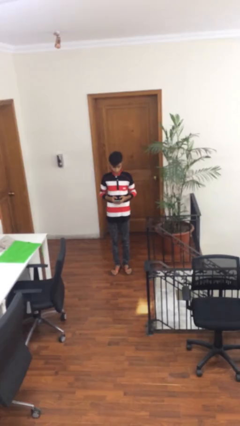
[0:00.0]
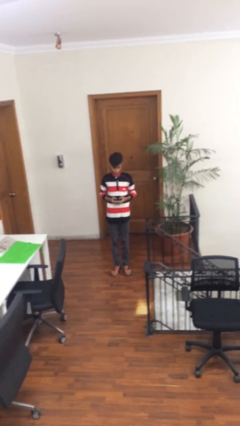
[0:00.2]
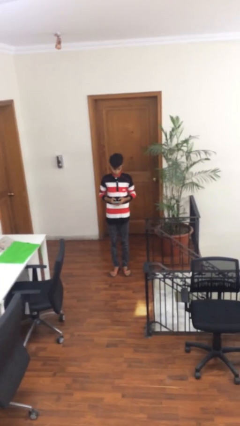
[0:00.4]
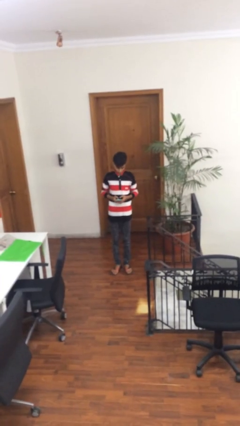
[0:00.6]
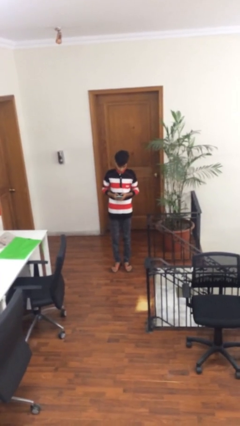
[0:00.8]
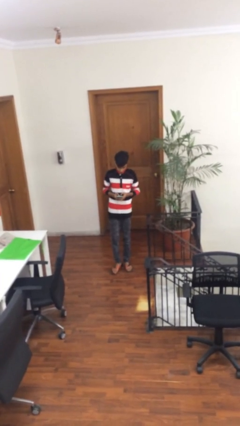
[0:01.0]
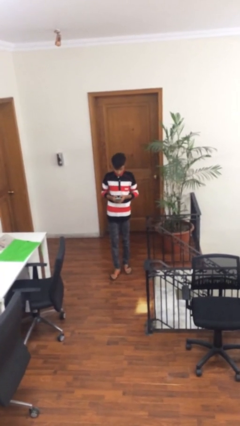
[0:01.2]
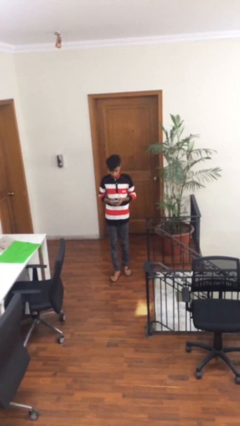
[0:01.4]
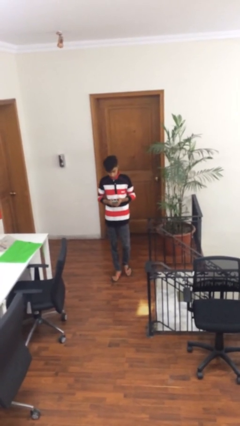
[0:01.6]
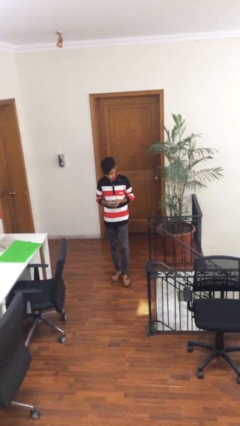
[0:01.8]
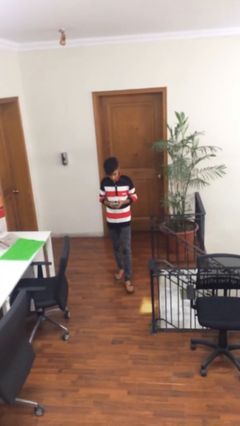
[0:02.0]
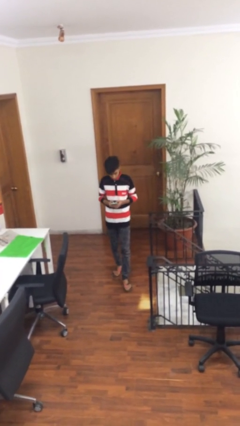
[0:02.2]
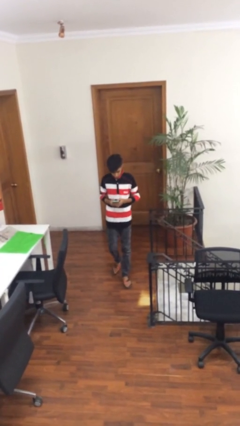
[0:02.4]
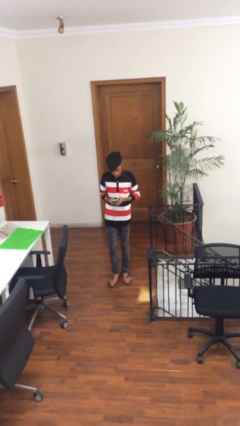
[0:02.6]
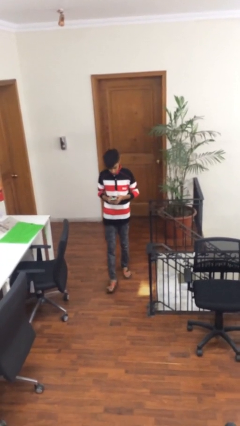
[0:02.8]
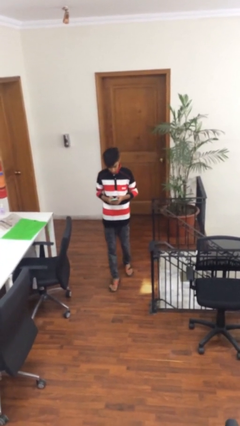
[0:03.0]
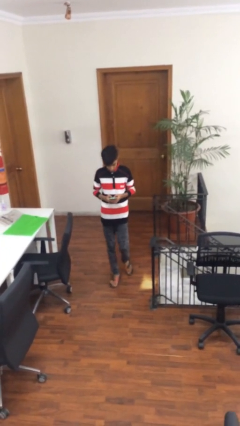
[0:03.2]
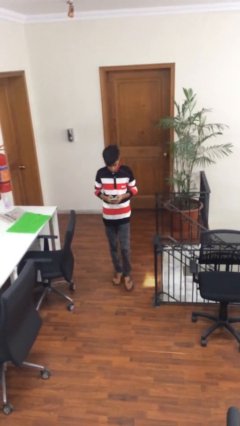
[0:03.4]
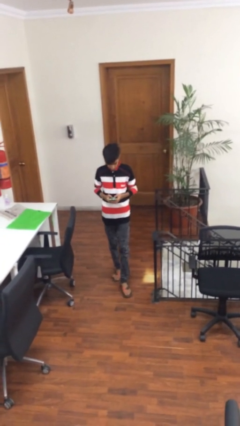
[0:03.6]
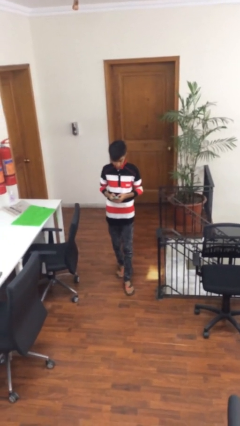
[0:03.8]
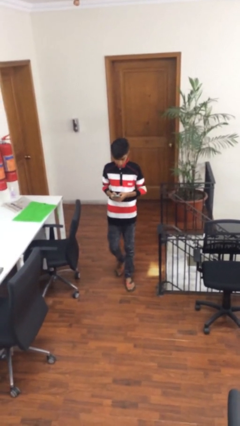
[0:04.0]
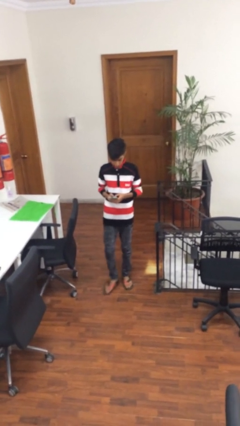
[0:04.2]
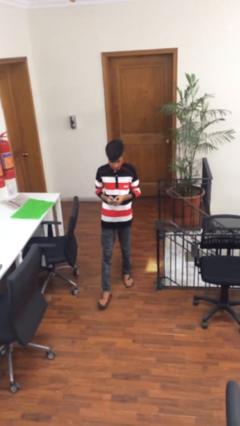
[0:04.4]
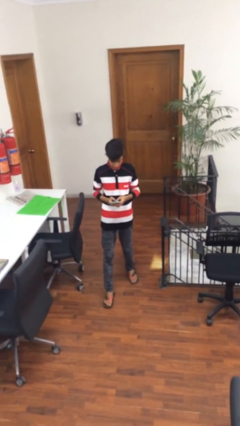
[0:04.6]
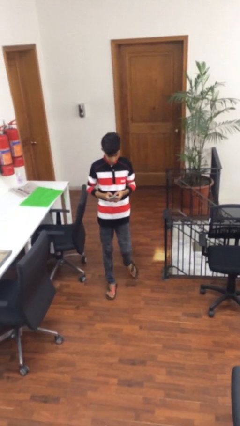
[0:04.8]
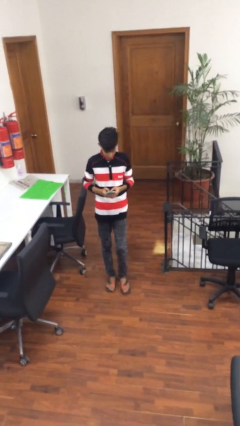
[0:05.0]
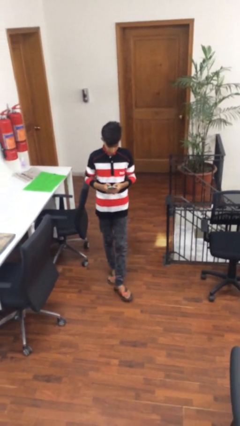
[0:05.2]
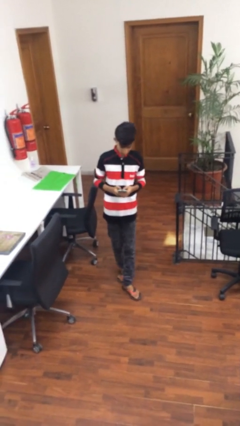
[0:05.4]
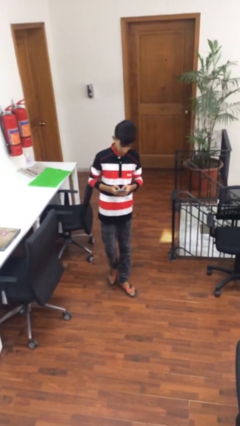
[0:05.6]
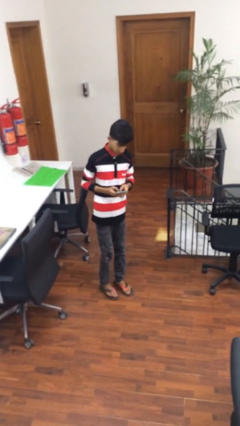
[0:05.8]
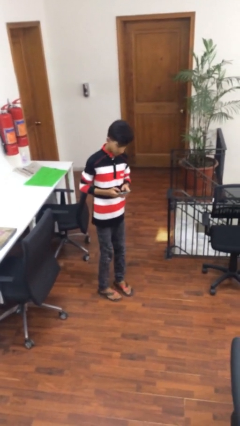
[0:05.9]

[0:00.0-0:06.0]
person texts on phone

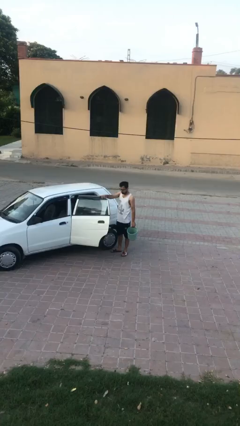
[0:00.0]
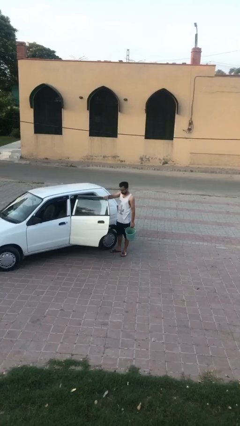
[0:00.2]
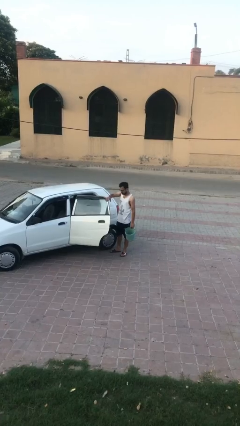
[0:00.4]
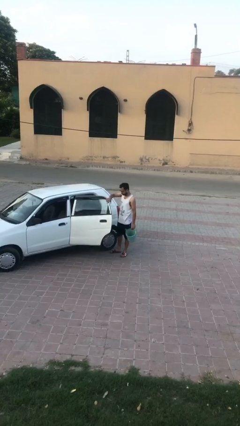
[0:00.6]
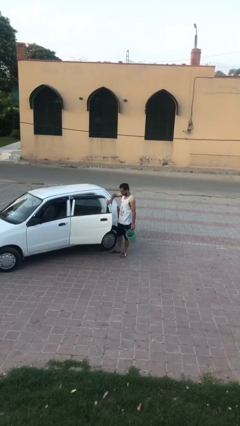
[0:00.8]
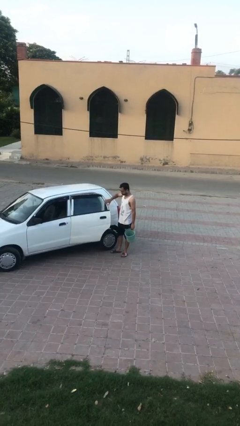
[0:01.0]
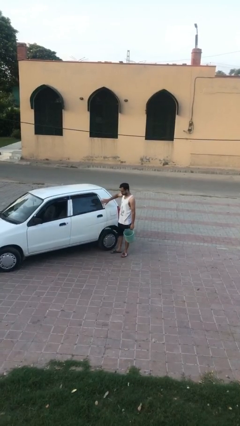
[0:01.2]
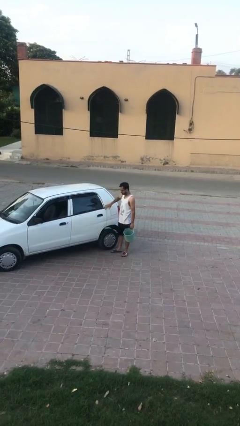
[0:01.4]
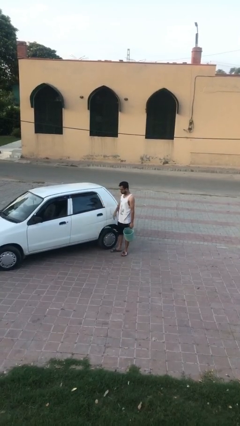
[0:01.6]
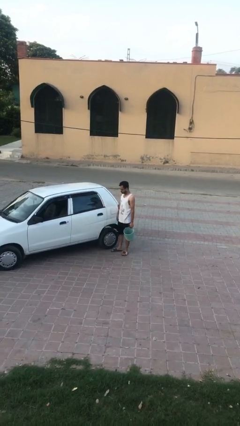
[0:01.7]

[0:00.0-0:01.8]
person closes car door

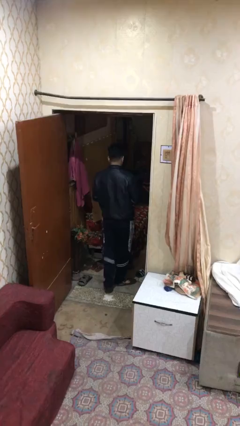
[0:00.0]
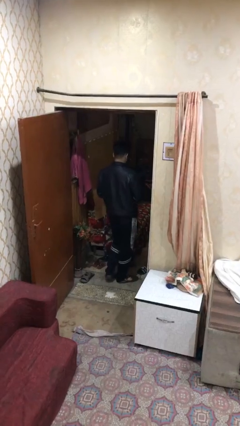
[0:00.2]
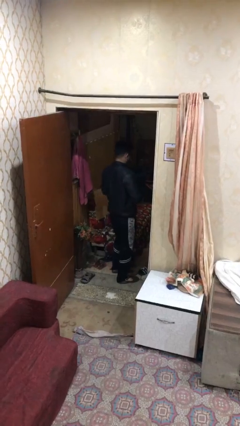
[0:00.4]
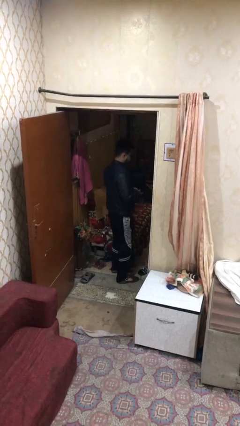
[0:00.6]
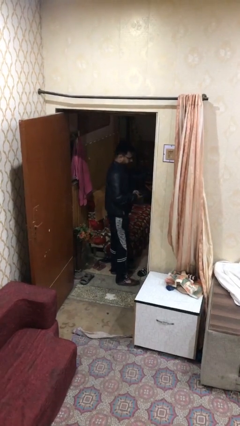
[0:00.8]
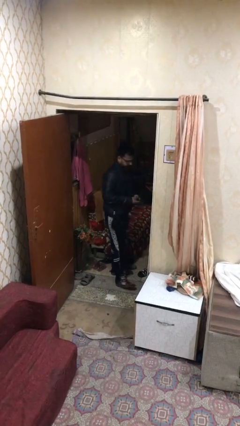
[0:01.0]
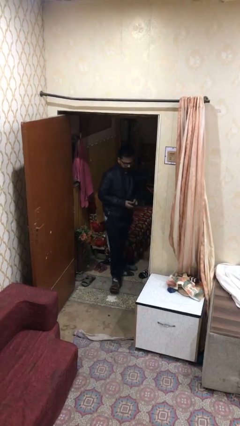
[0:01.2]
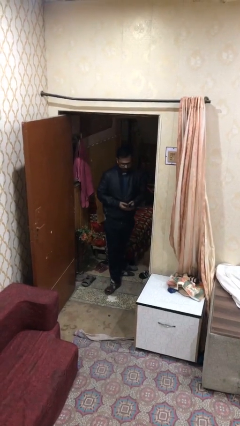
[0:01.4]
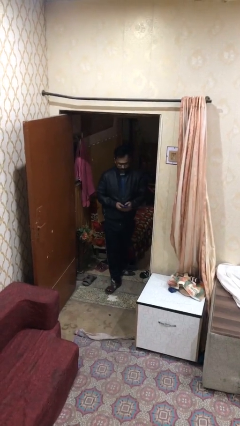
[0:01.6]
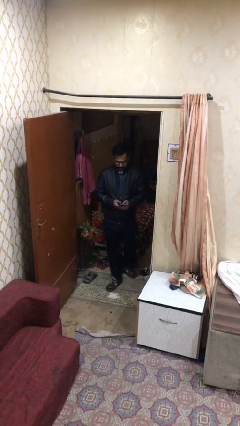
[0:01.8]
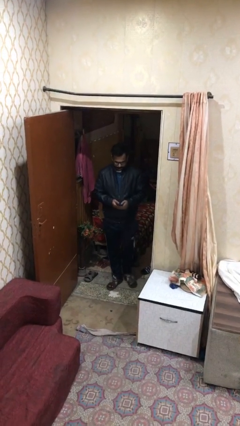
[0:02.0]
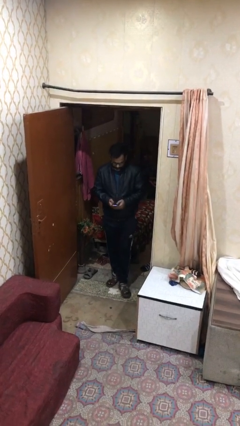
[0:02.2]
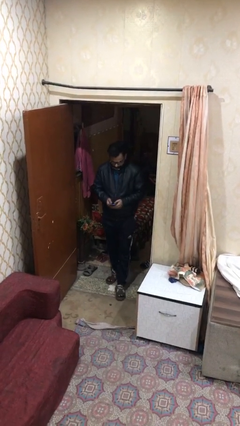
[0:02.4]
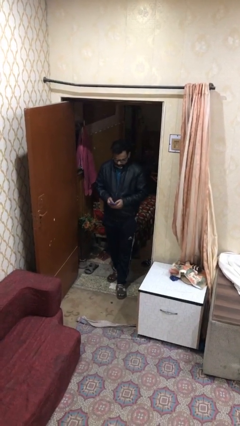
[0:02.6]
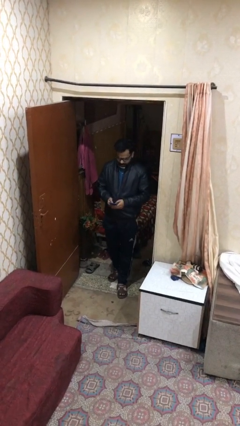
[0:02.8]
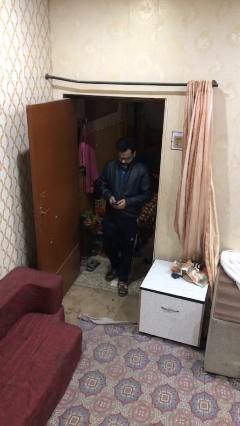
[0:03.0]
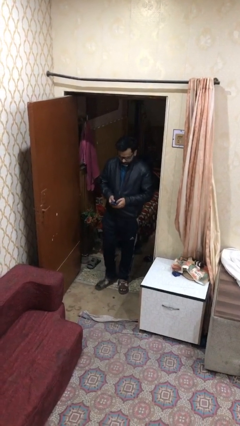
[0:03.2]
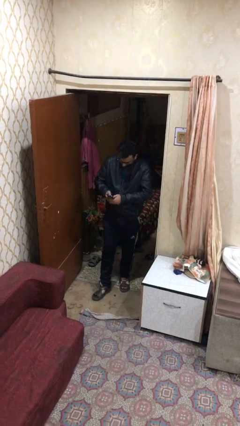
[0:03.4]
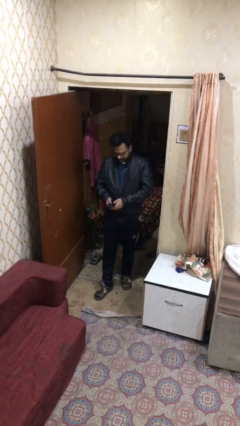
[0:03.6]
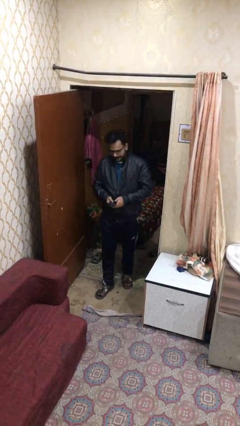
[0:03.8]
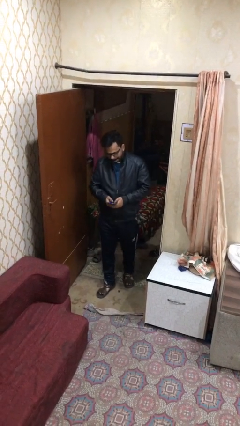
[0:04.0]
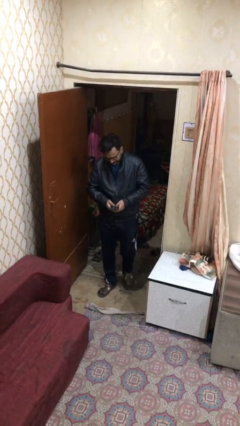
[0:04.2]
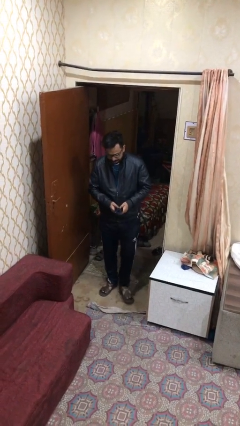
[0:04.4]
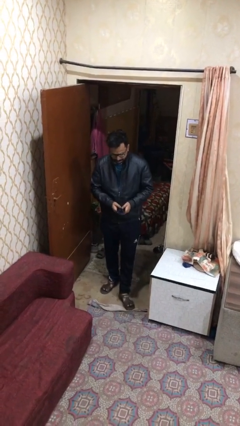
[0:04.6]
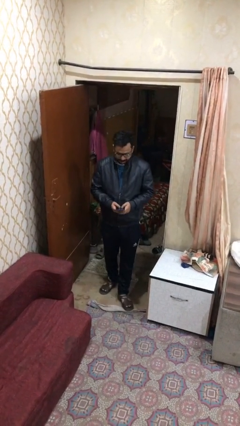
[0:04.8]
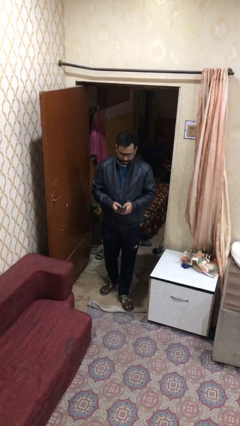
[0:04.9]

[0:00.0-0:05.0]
person enters scene through structure

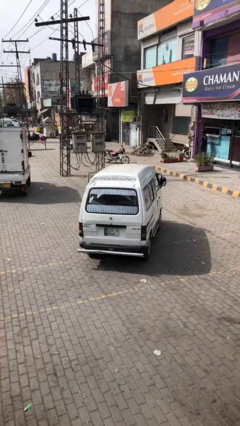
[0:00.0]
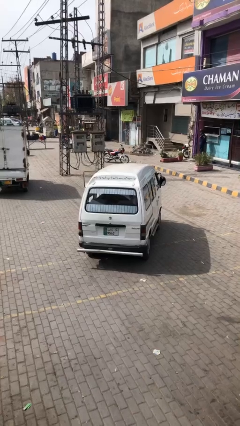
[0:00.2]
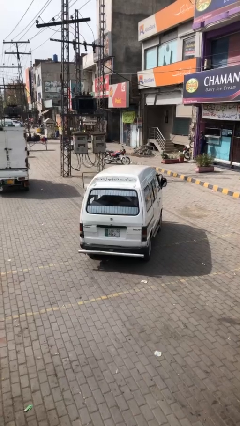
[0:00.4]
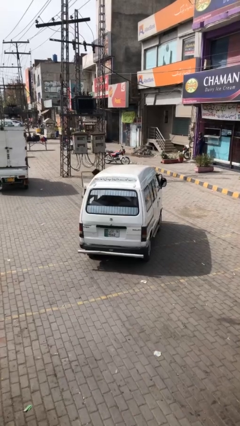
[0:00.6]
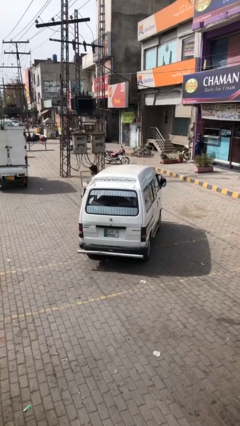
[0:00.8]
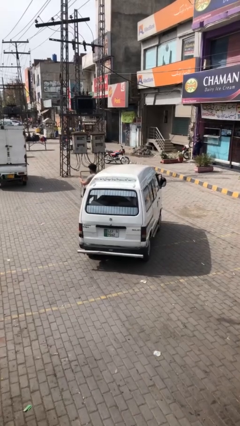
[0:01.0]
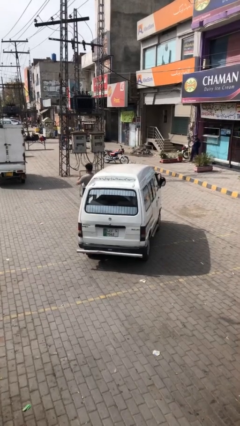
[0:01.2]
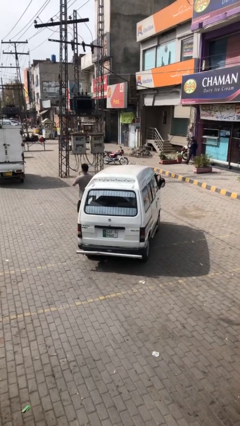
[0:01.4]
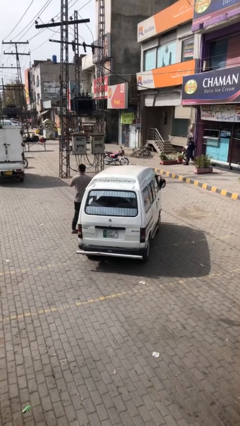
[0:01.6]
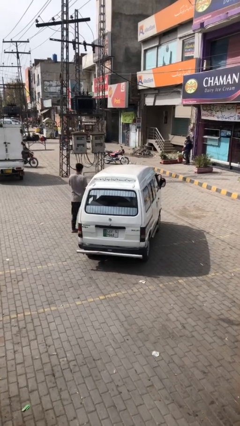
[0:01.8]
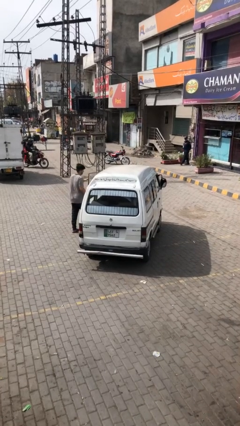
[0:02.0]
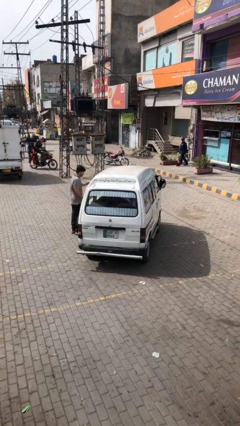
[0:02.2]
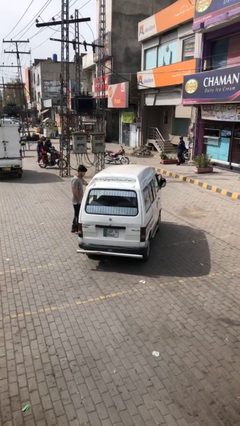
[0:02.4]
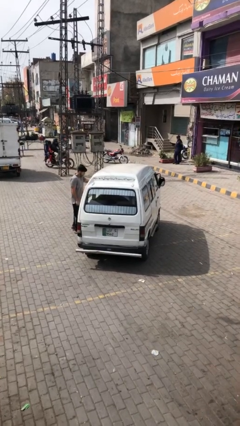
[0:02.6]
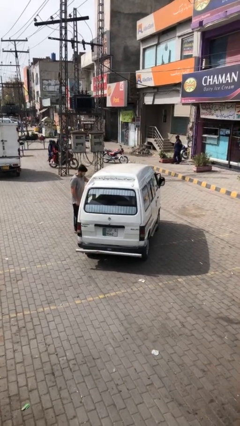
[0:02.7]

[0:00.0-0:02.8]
car drops off person

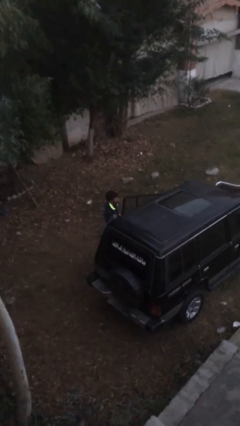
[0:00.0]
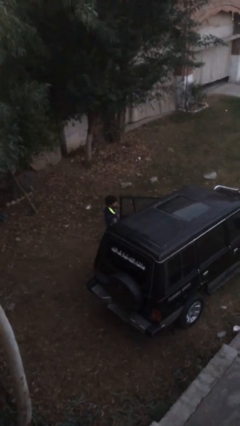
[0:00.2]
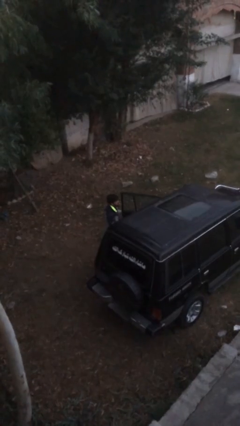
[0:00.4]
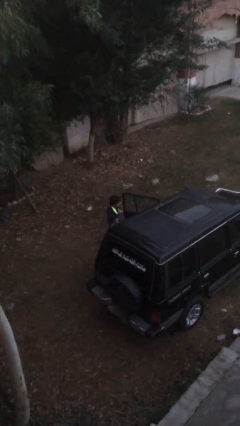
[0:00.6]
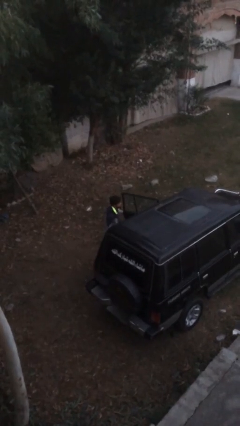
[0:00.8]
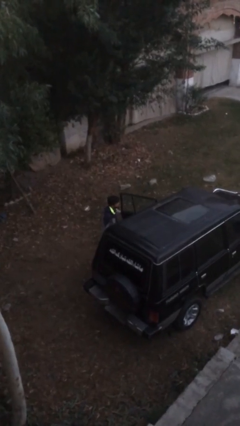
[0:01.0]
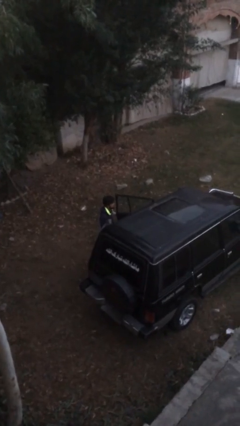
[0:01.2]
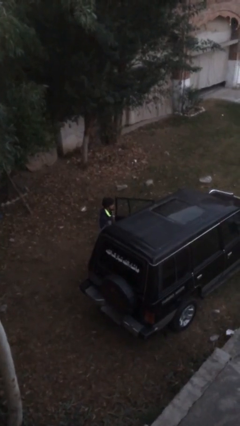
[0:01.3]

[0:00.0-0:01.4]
person opens car door

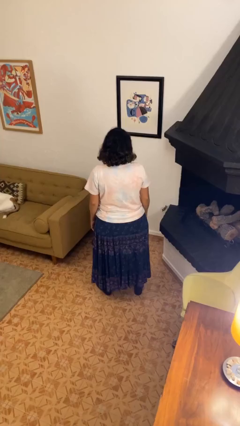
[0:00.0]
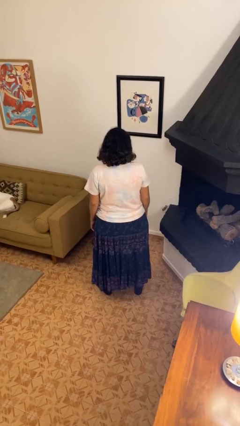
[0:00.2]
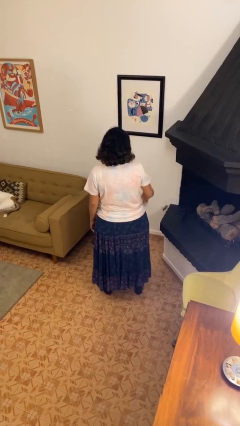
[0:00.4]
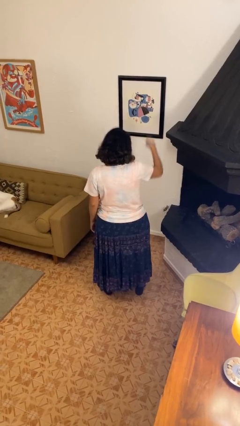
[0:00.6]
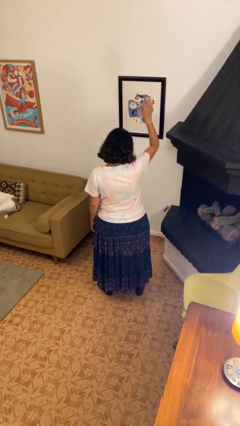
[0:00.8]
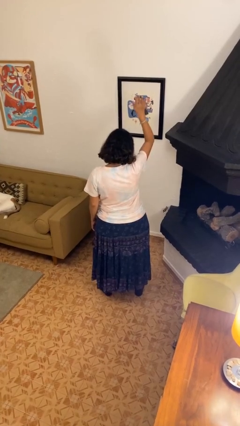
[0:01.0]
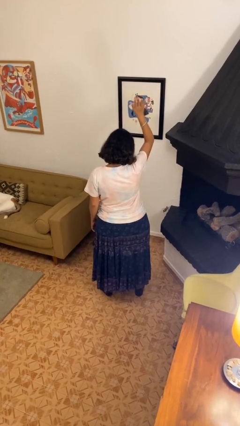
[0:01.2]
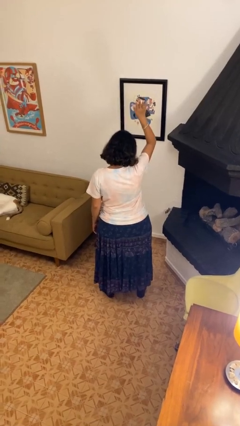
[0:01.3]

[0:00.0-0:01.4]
person gestures raise hand
